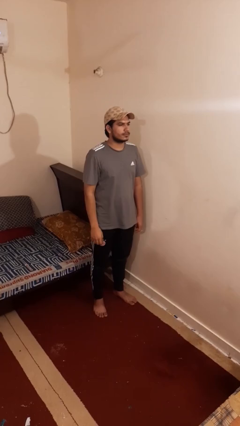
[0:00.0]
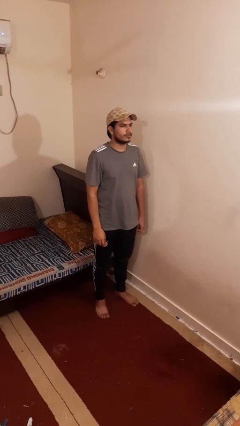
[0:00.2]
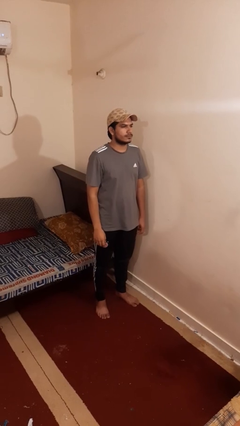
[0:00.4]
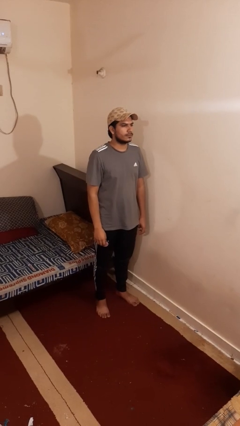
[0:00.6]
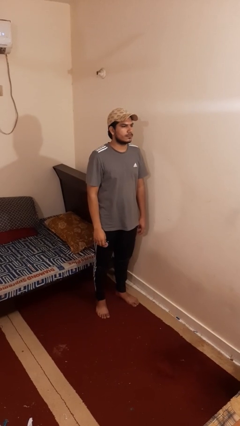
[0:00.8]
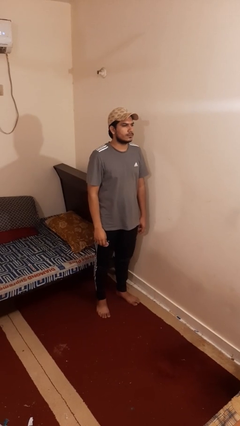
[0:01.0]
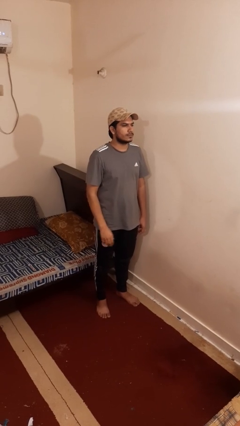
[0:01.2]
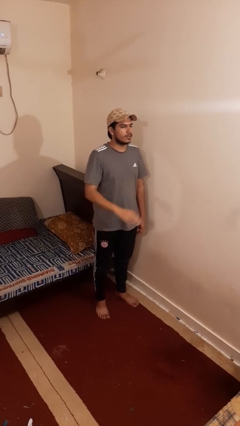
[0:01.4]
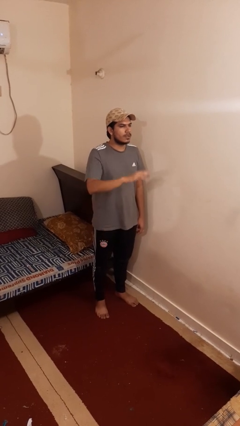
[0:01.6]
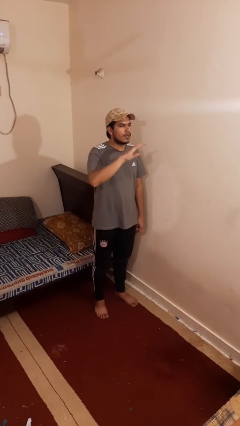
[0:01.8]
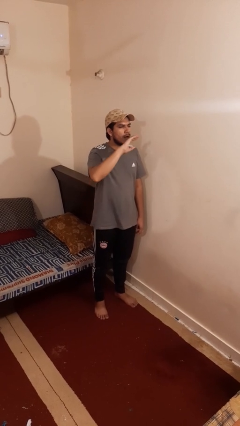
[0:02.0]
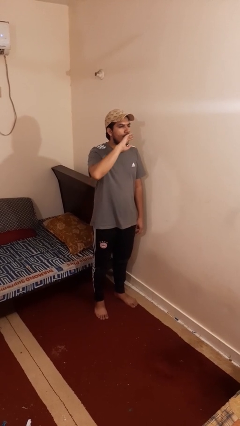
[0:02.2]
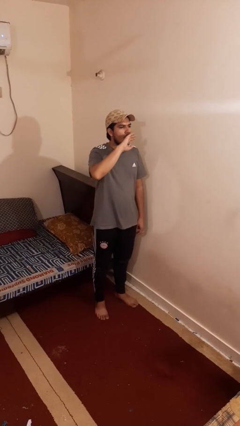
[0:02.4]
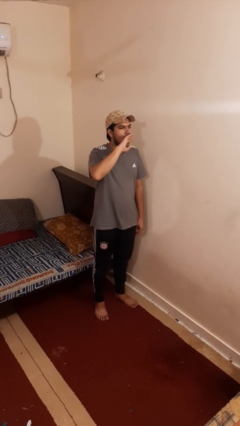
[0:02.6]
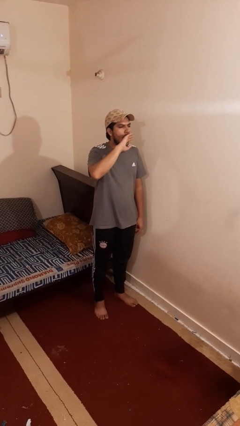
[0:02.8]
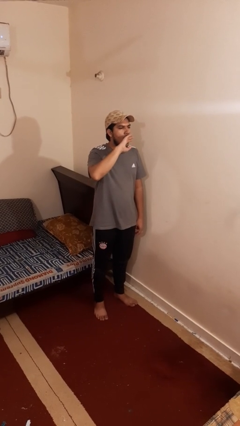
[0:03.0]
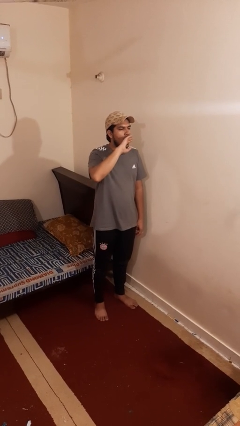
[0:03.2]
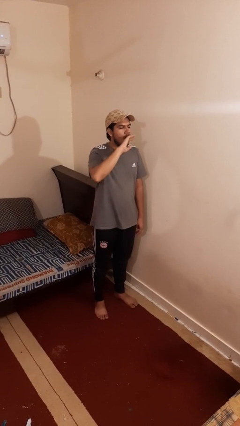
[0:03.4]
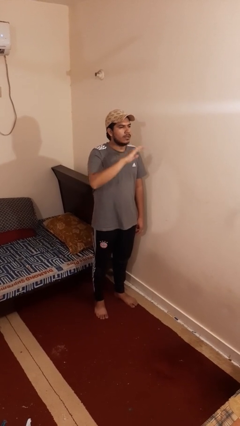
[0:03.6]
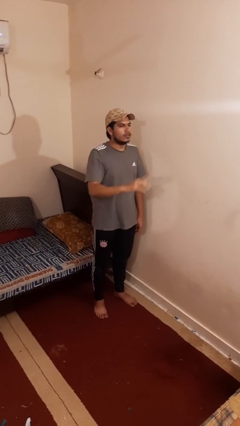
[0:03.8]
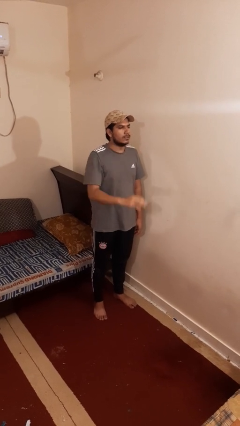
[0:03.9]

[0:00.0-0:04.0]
person yawns

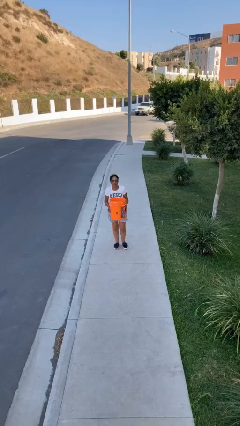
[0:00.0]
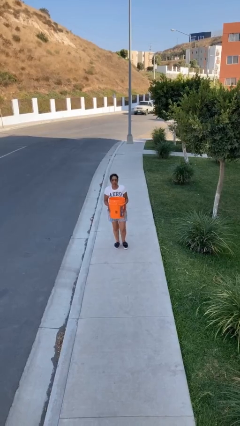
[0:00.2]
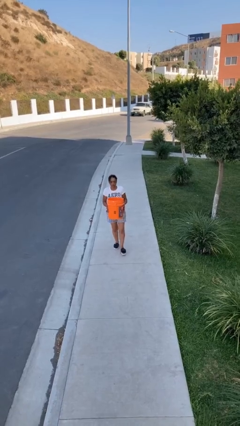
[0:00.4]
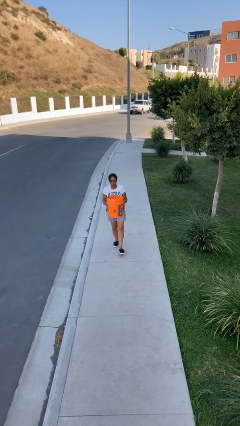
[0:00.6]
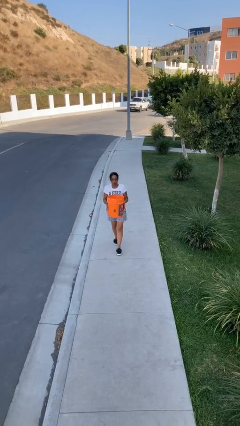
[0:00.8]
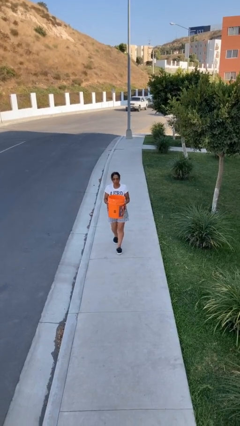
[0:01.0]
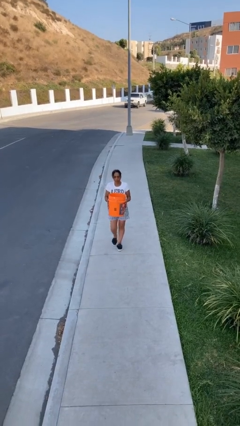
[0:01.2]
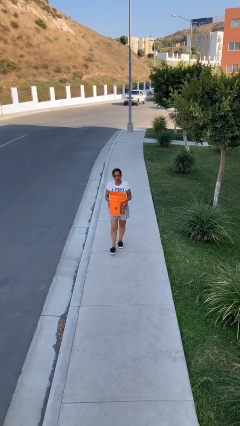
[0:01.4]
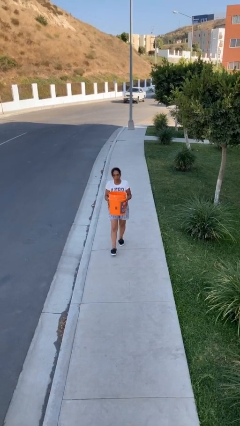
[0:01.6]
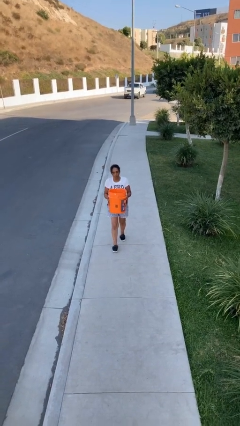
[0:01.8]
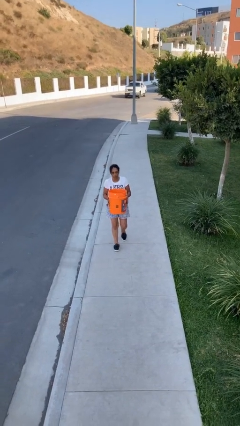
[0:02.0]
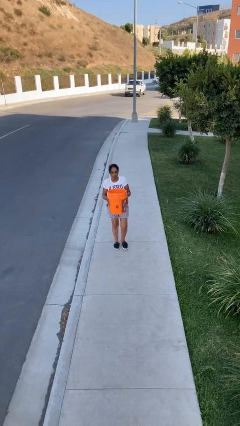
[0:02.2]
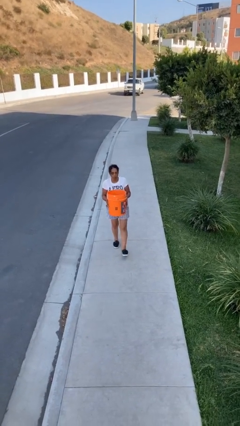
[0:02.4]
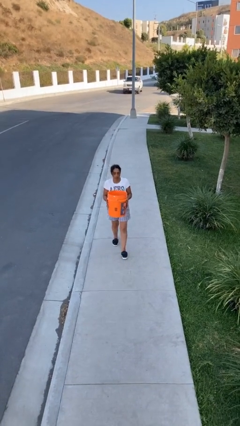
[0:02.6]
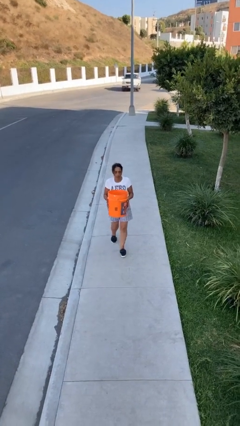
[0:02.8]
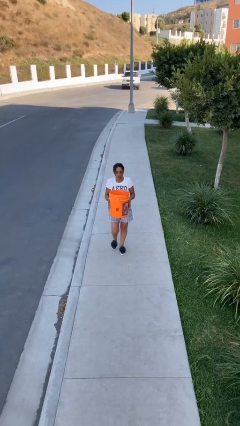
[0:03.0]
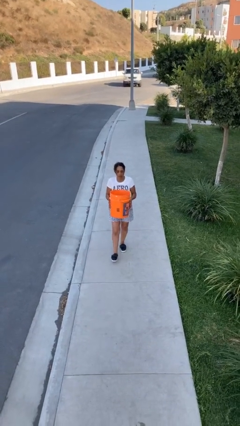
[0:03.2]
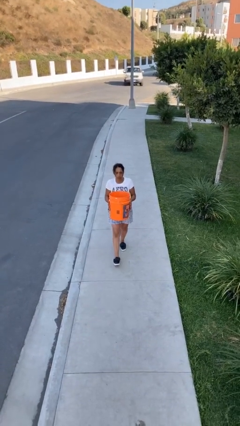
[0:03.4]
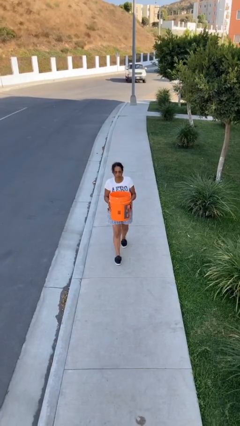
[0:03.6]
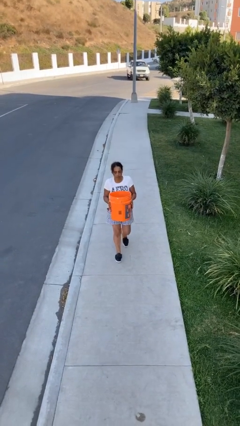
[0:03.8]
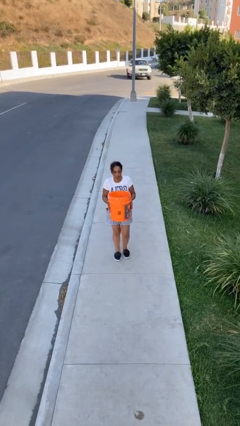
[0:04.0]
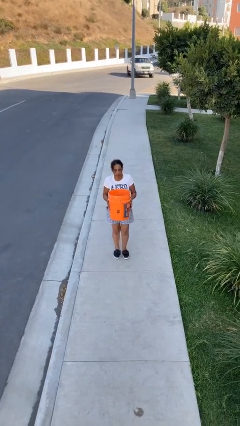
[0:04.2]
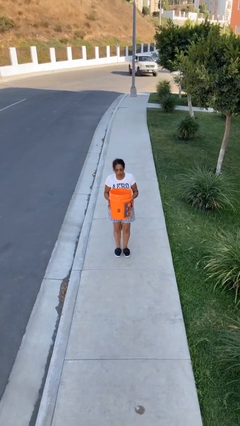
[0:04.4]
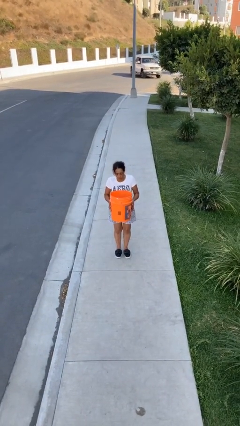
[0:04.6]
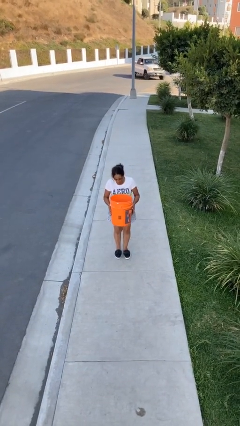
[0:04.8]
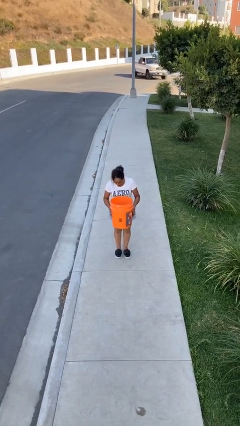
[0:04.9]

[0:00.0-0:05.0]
person carries heavy object

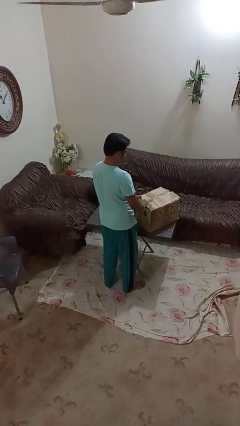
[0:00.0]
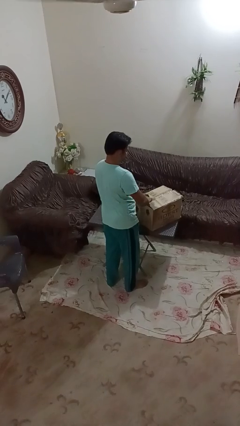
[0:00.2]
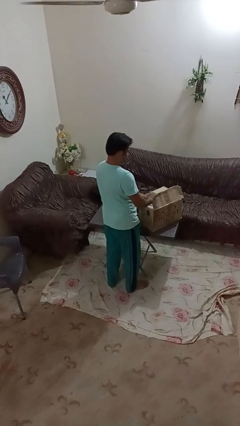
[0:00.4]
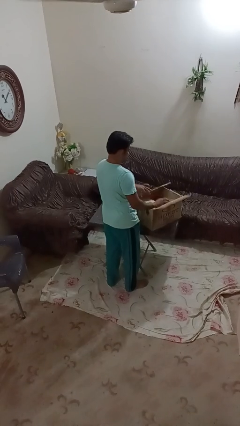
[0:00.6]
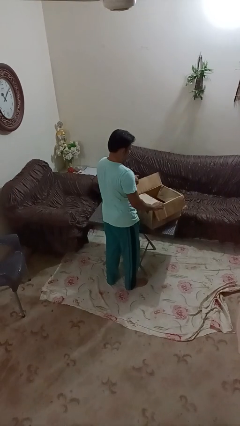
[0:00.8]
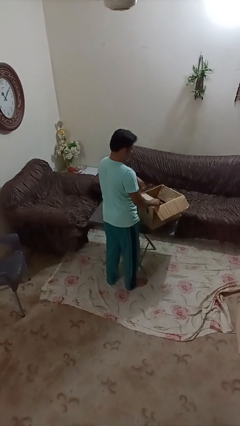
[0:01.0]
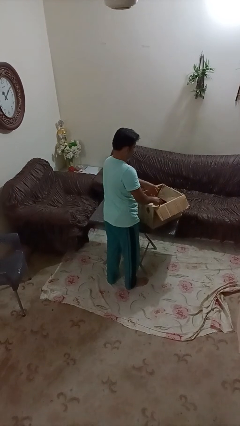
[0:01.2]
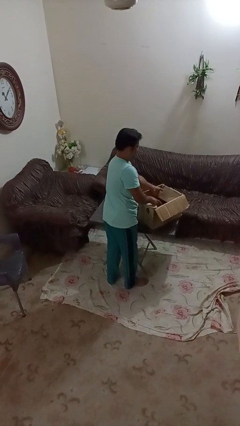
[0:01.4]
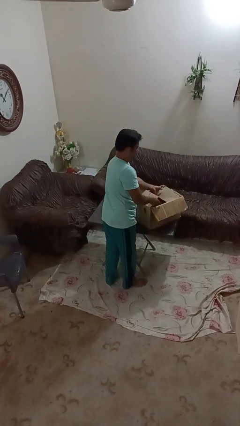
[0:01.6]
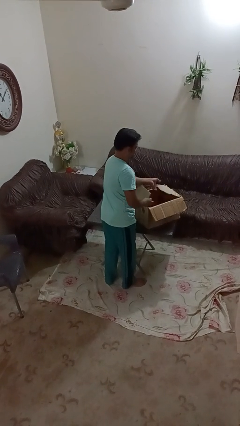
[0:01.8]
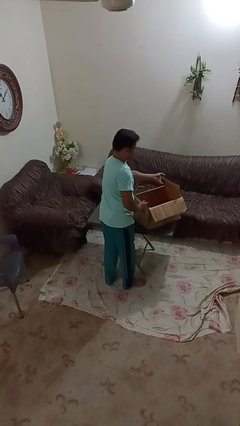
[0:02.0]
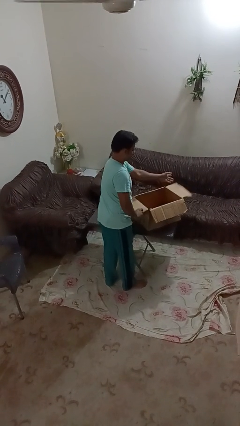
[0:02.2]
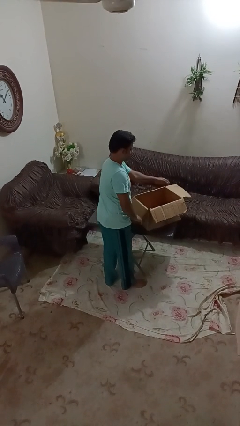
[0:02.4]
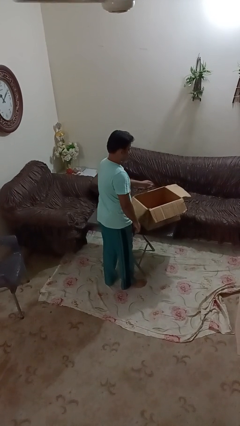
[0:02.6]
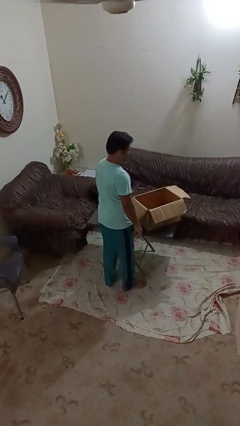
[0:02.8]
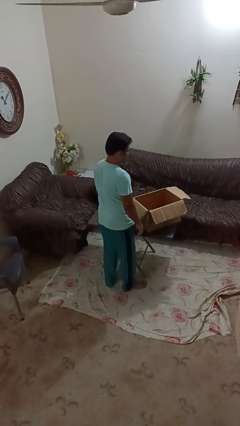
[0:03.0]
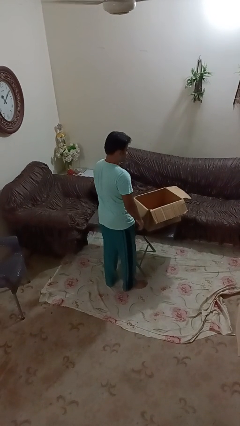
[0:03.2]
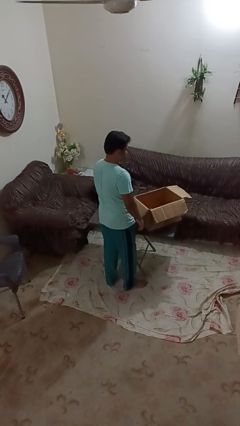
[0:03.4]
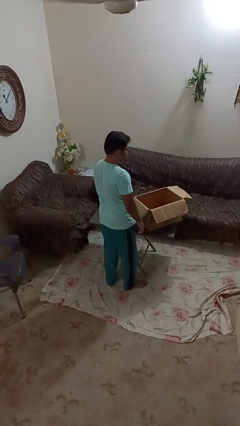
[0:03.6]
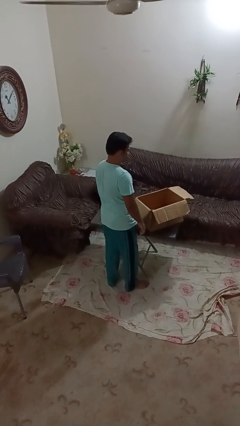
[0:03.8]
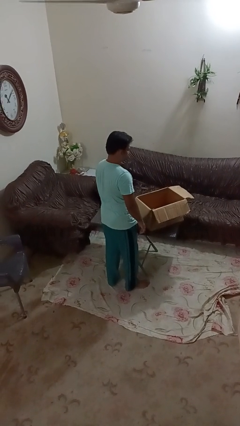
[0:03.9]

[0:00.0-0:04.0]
person opens box

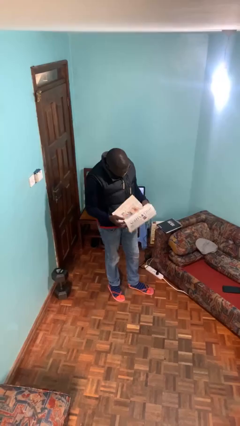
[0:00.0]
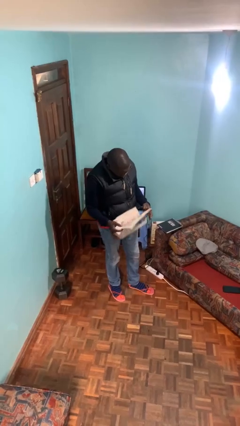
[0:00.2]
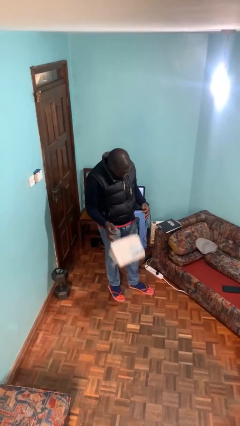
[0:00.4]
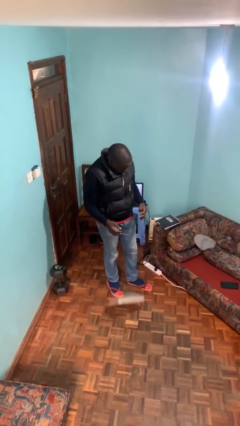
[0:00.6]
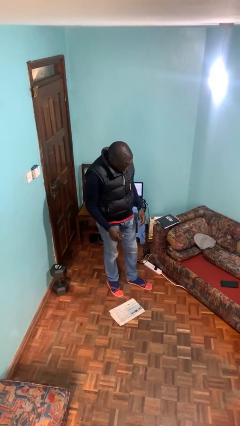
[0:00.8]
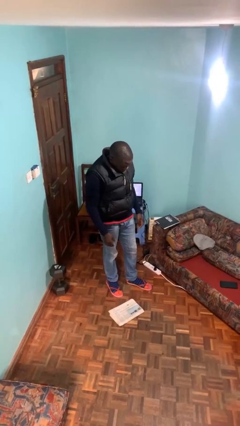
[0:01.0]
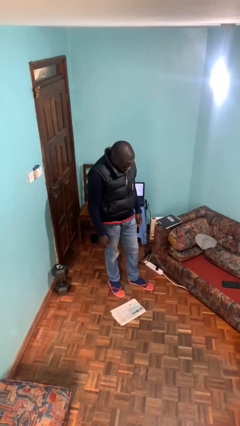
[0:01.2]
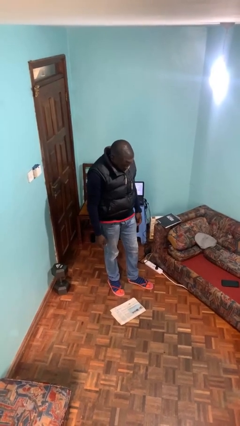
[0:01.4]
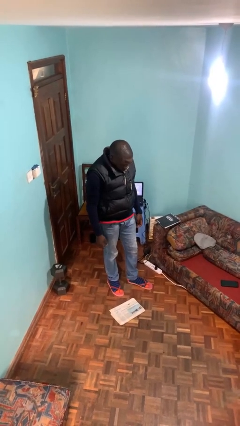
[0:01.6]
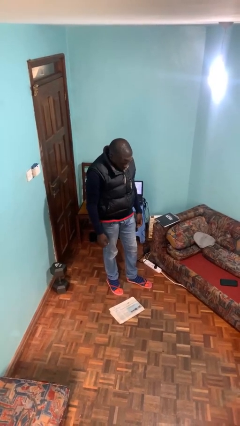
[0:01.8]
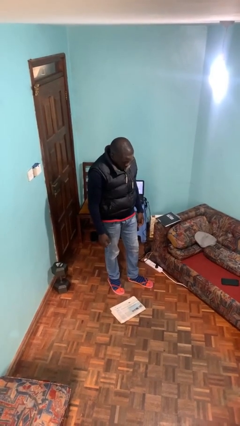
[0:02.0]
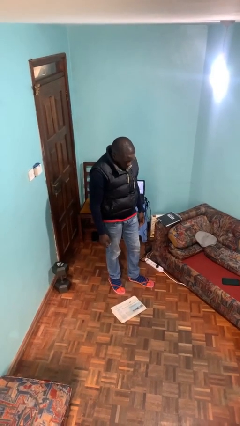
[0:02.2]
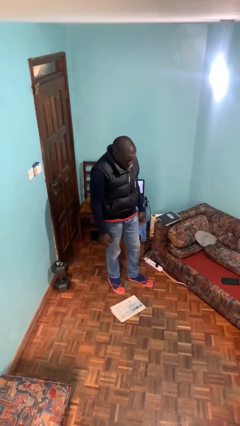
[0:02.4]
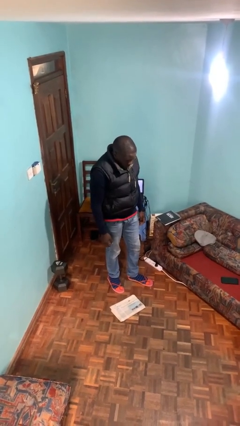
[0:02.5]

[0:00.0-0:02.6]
person drops object

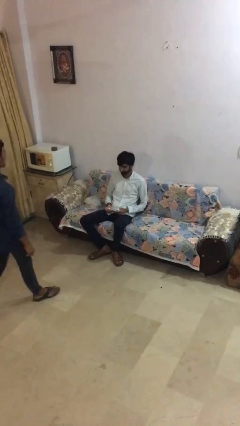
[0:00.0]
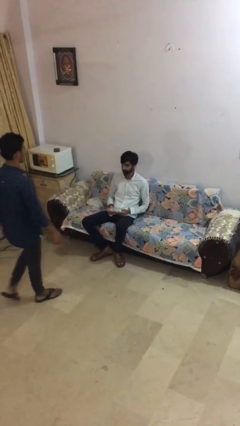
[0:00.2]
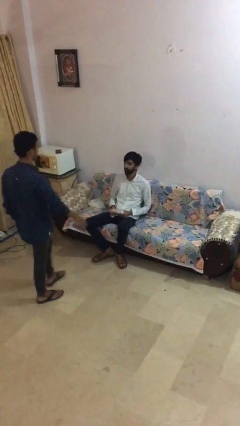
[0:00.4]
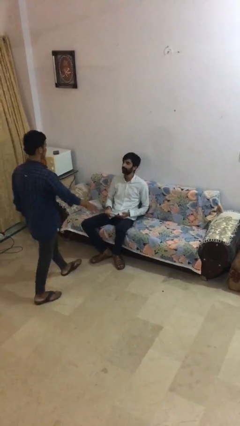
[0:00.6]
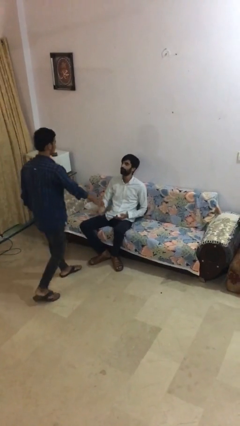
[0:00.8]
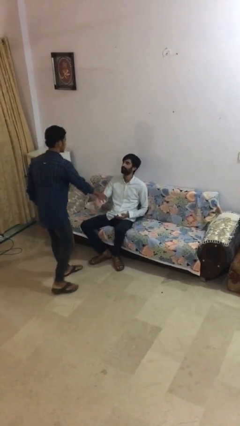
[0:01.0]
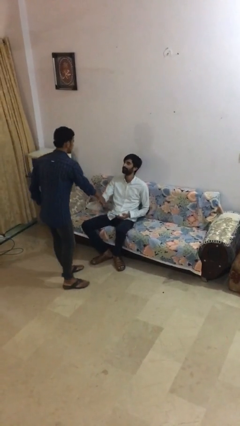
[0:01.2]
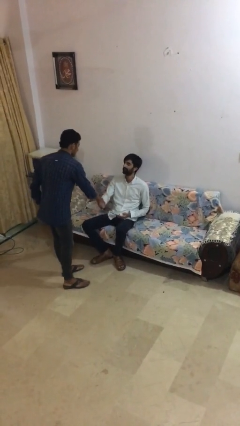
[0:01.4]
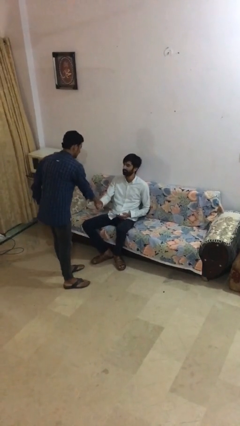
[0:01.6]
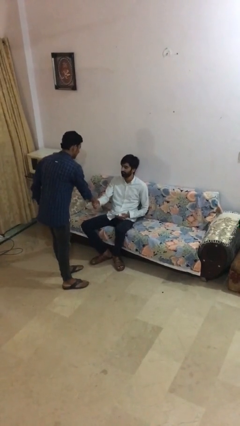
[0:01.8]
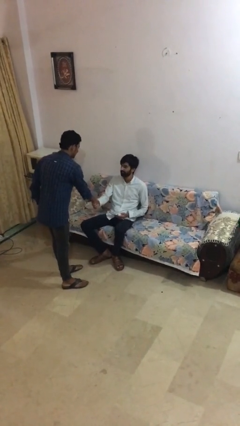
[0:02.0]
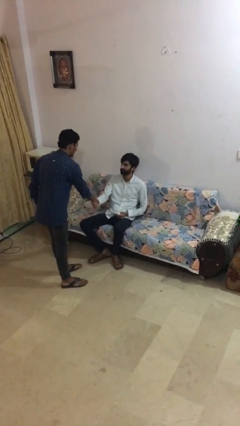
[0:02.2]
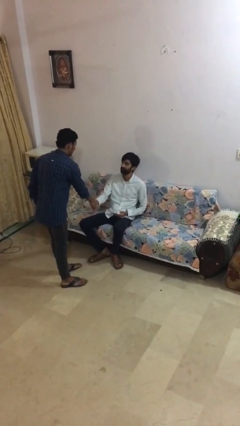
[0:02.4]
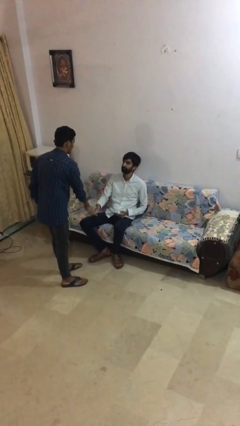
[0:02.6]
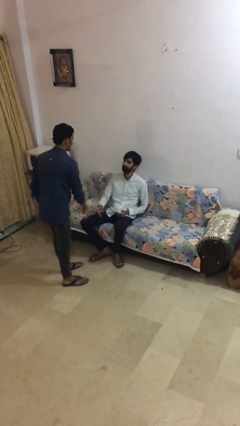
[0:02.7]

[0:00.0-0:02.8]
person shakes hand
